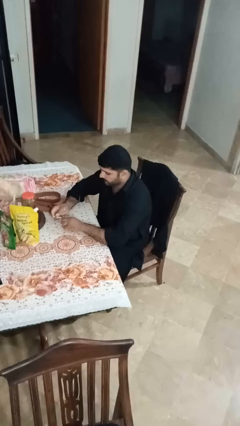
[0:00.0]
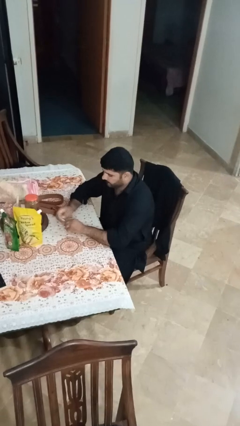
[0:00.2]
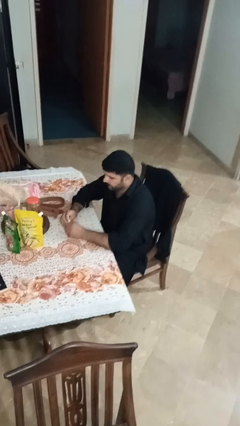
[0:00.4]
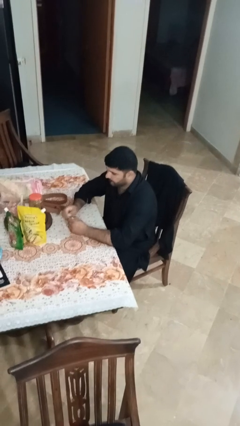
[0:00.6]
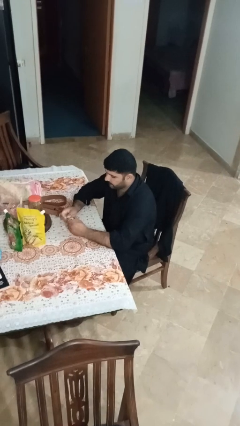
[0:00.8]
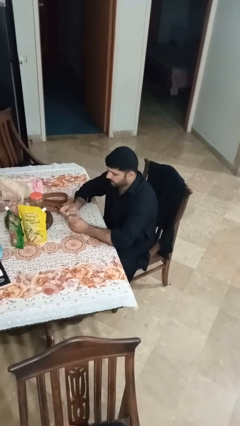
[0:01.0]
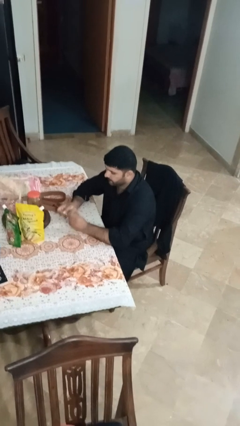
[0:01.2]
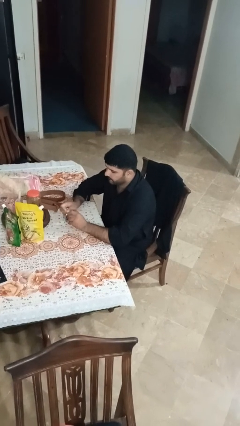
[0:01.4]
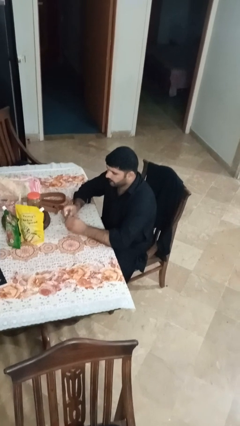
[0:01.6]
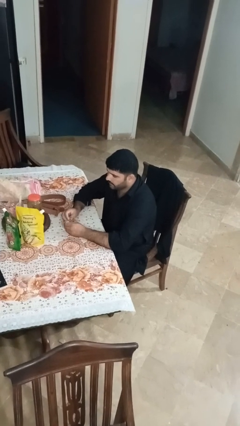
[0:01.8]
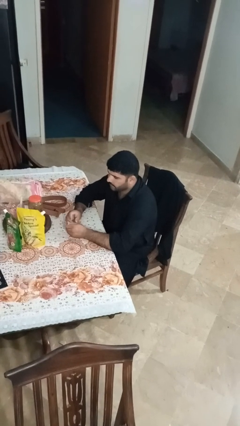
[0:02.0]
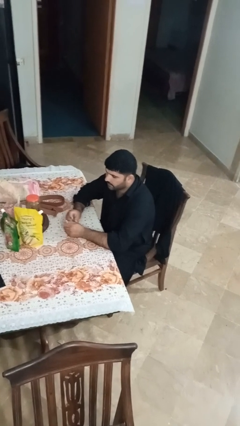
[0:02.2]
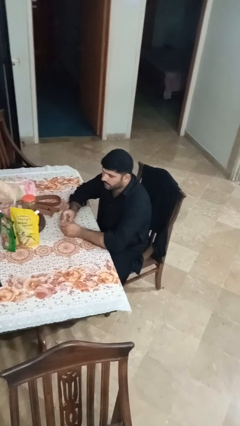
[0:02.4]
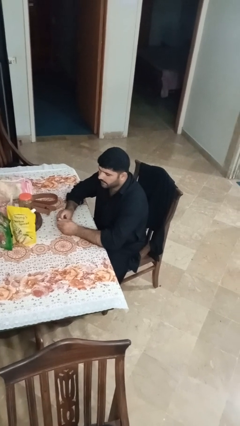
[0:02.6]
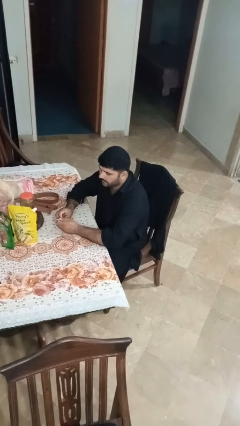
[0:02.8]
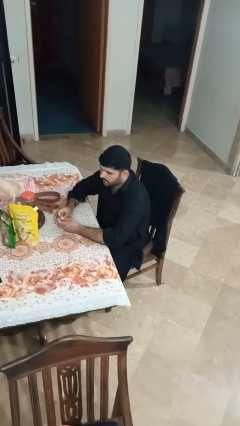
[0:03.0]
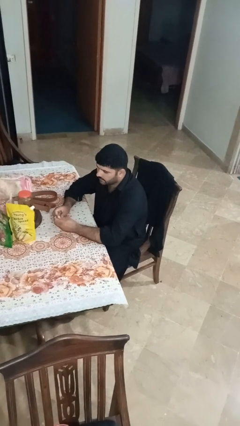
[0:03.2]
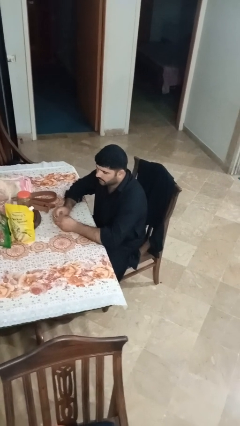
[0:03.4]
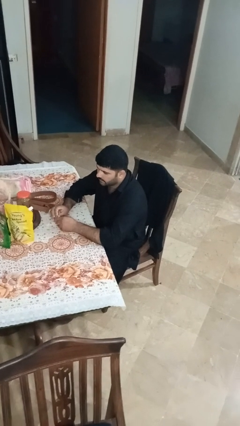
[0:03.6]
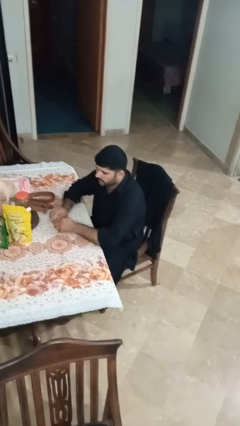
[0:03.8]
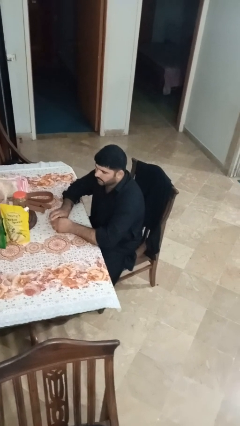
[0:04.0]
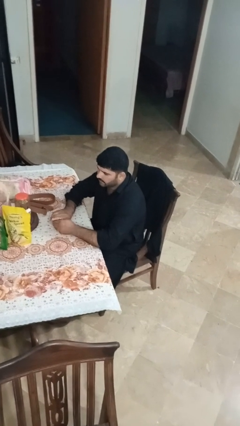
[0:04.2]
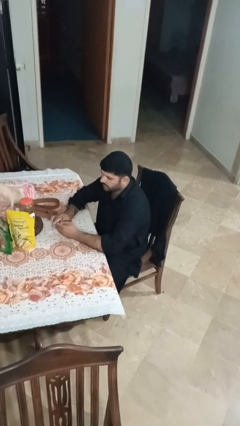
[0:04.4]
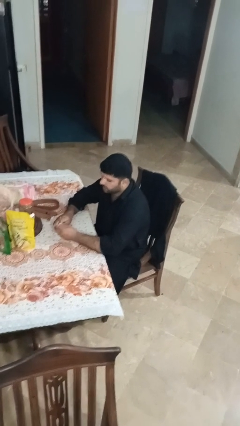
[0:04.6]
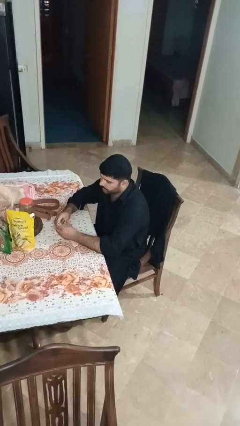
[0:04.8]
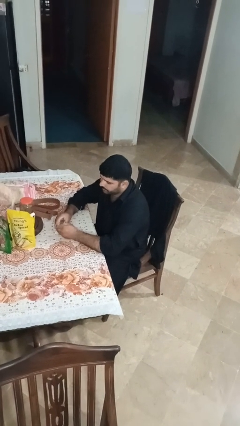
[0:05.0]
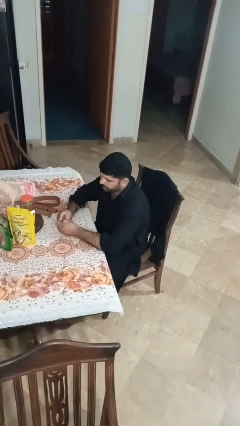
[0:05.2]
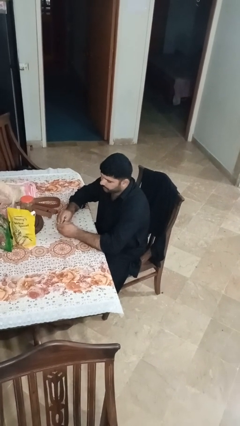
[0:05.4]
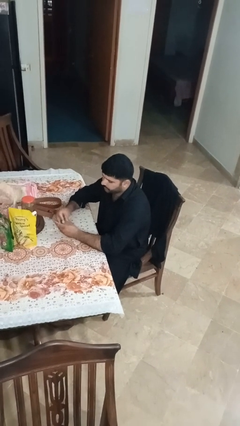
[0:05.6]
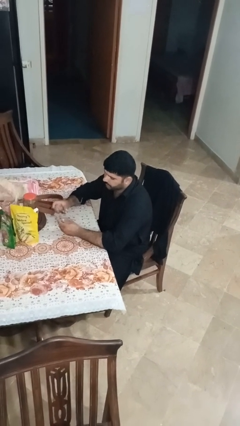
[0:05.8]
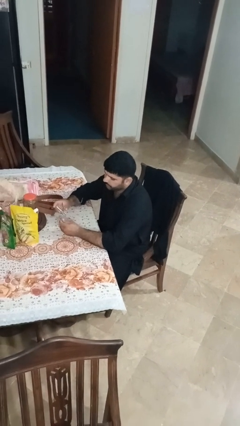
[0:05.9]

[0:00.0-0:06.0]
person clips fingernails

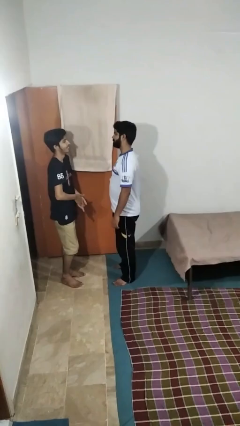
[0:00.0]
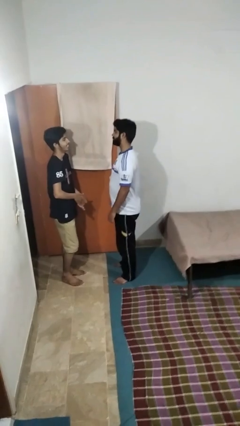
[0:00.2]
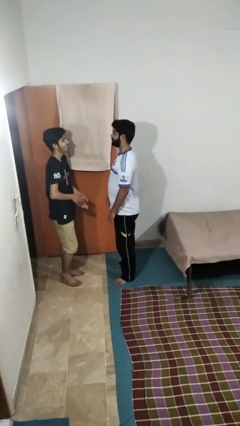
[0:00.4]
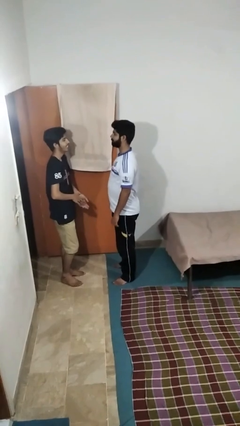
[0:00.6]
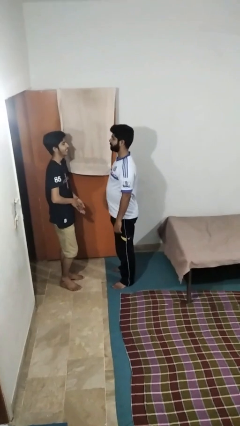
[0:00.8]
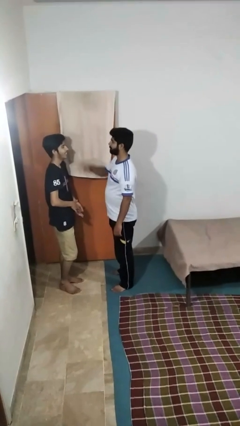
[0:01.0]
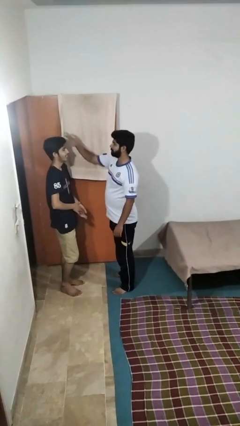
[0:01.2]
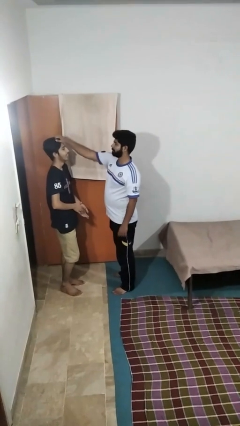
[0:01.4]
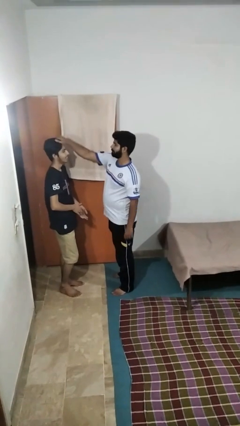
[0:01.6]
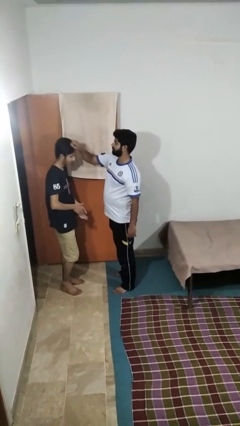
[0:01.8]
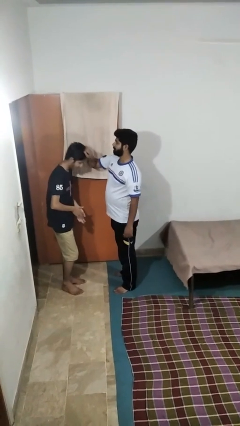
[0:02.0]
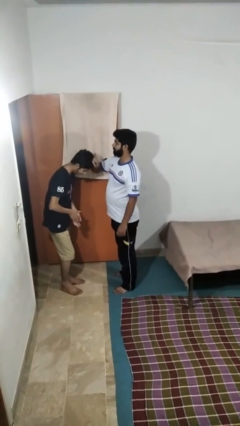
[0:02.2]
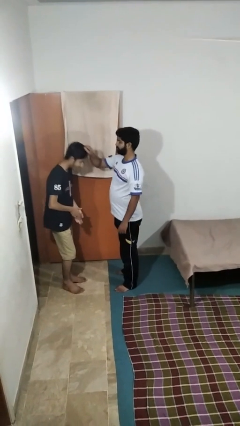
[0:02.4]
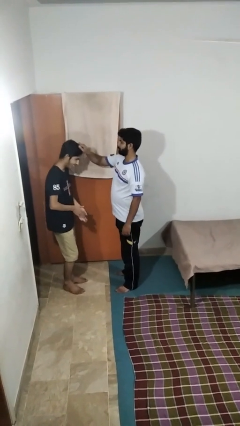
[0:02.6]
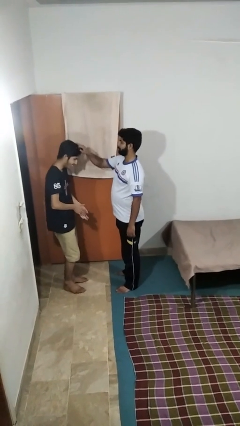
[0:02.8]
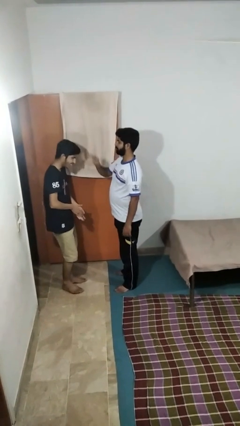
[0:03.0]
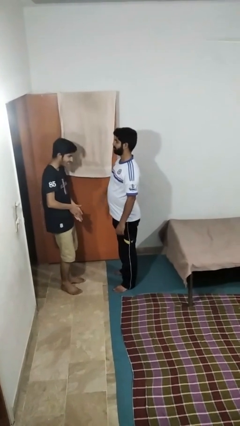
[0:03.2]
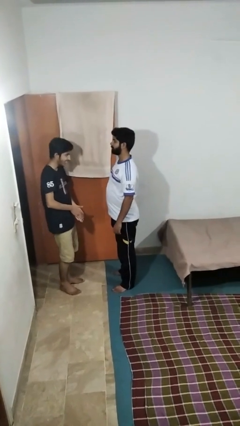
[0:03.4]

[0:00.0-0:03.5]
person grabs person by hair

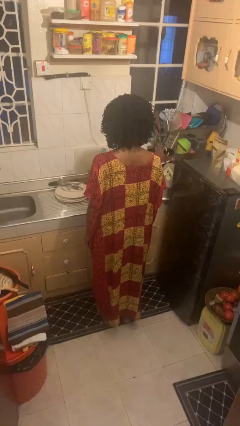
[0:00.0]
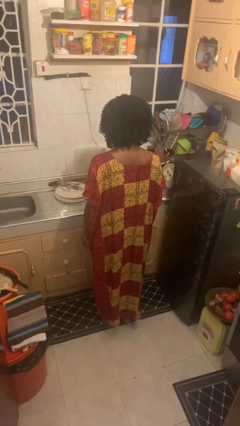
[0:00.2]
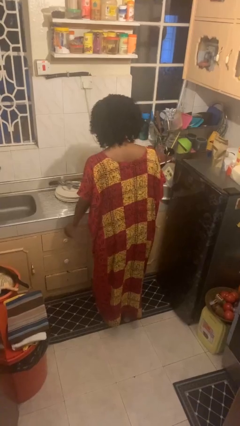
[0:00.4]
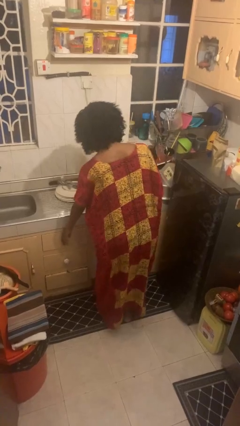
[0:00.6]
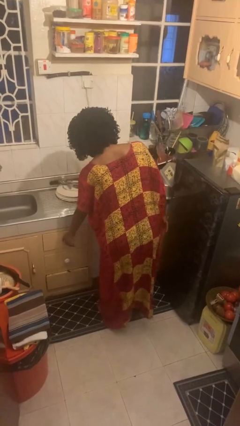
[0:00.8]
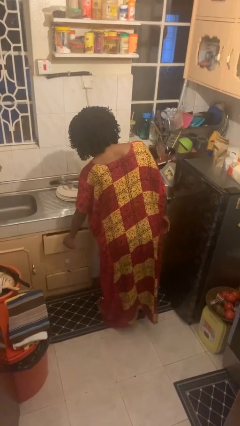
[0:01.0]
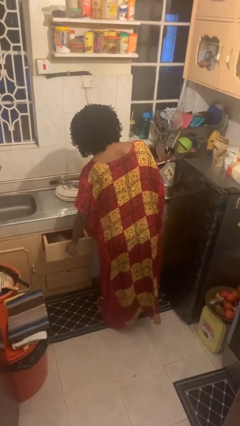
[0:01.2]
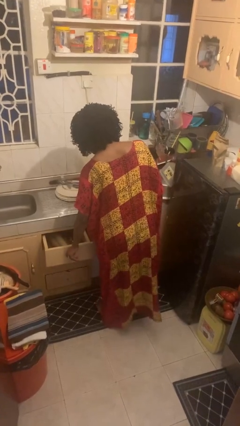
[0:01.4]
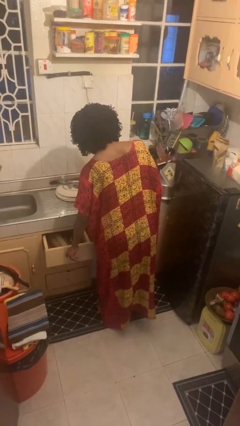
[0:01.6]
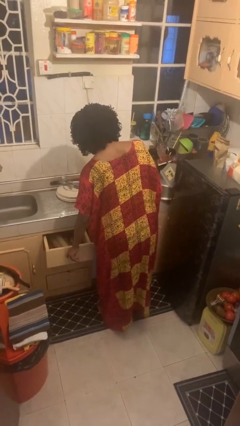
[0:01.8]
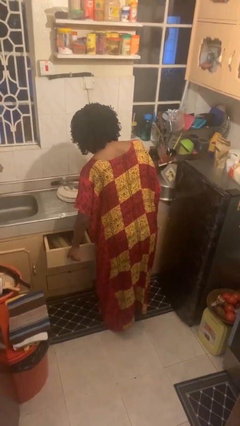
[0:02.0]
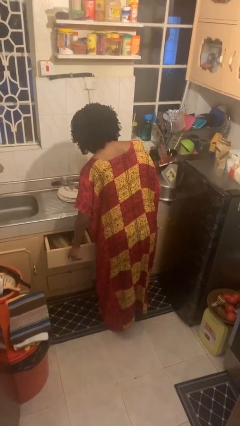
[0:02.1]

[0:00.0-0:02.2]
person opens kitchen drawer

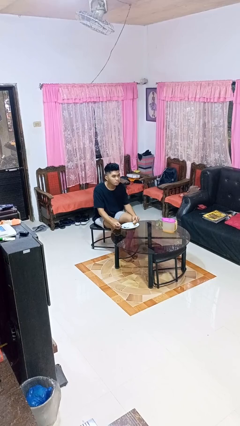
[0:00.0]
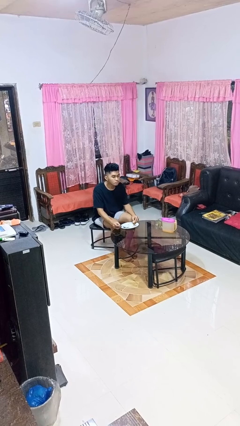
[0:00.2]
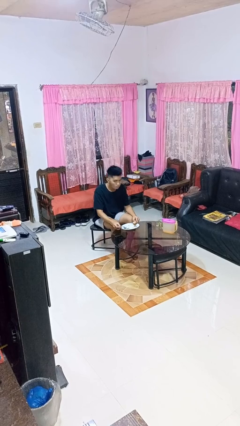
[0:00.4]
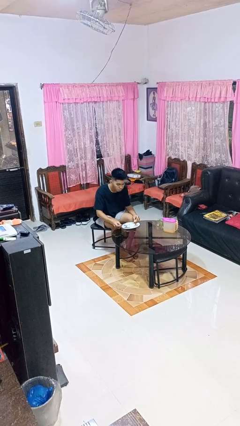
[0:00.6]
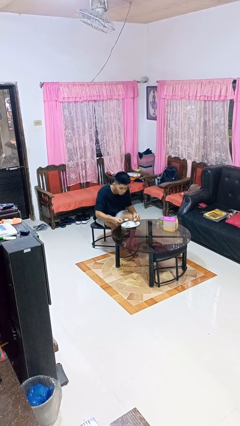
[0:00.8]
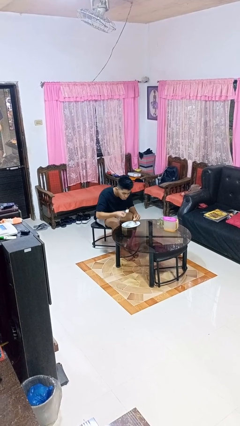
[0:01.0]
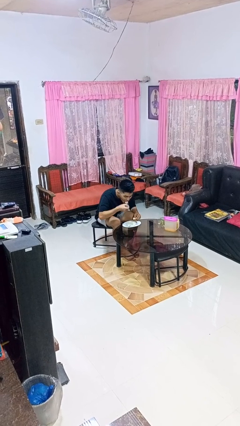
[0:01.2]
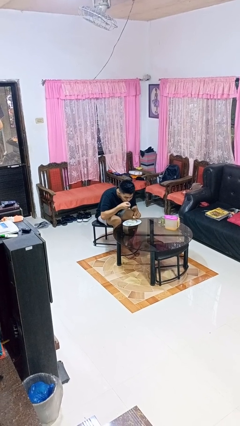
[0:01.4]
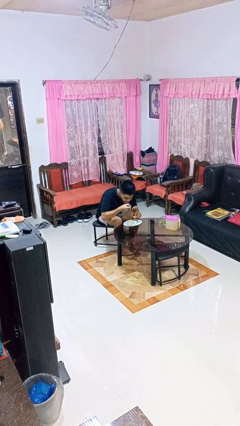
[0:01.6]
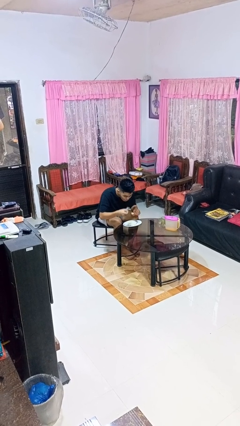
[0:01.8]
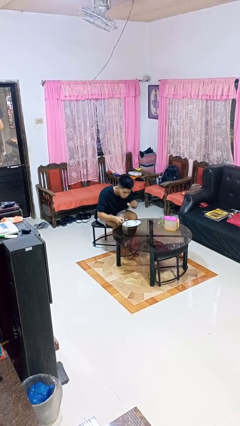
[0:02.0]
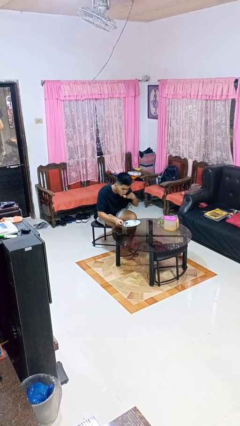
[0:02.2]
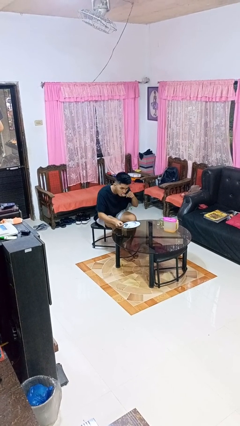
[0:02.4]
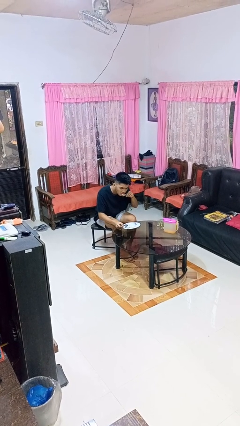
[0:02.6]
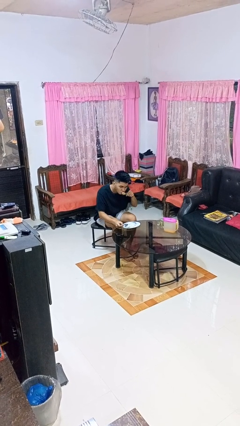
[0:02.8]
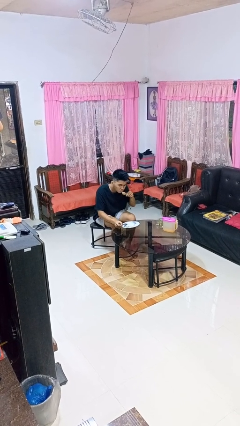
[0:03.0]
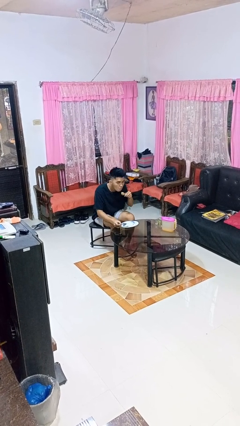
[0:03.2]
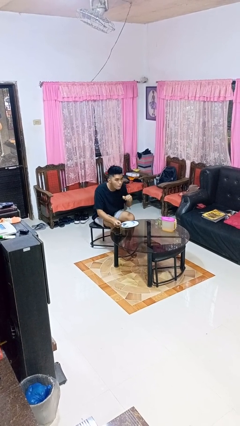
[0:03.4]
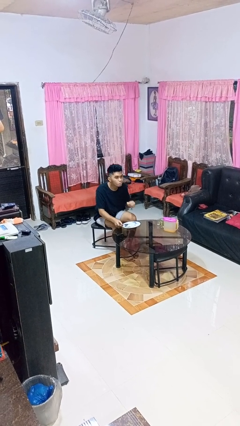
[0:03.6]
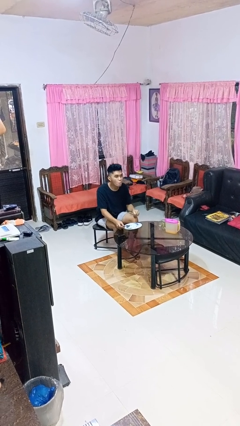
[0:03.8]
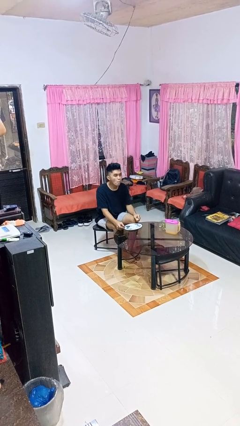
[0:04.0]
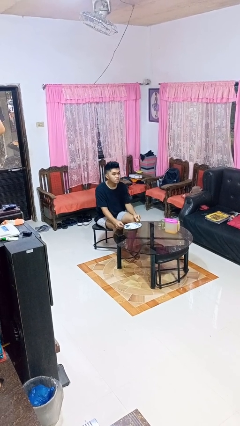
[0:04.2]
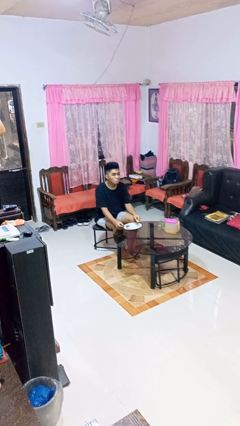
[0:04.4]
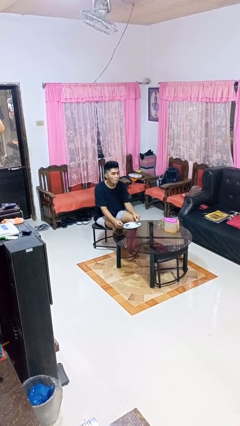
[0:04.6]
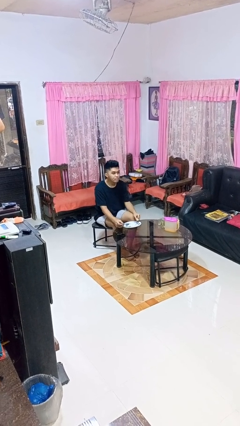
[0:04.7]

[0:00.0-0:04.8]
person eats with utensil

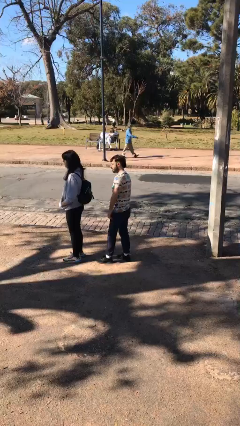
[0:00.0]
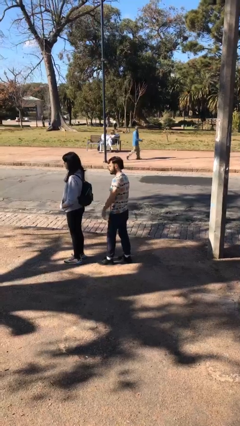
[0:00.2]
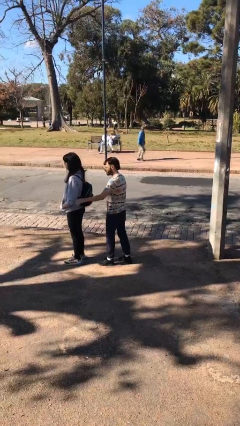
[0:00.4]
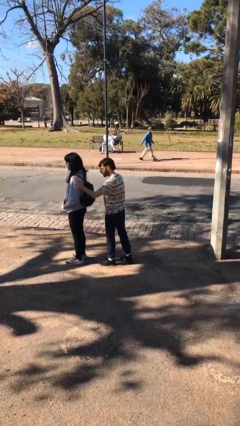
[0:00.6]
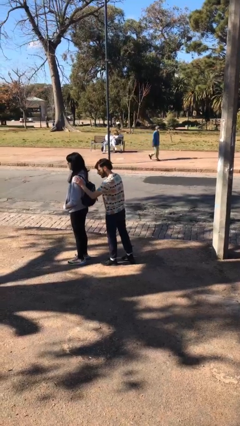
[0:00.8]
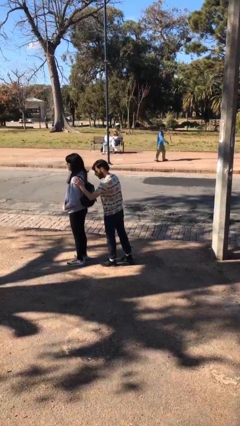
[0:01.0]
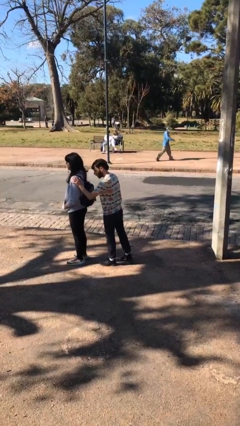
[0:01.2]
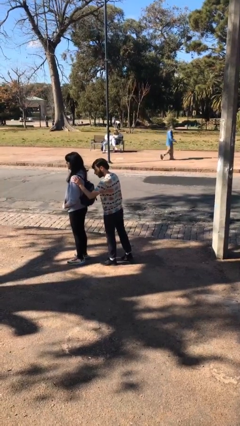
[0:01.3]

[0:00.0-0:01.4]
person grabs person by shoulder

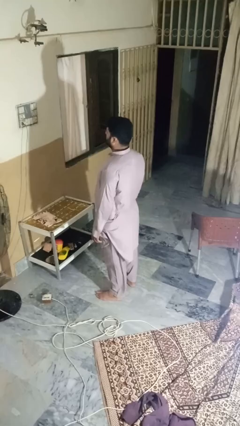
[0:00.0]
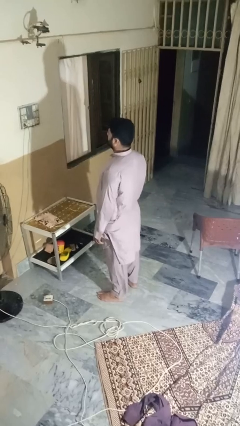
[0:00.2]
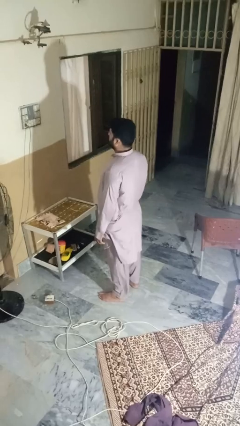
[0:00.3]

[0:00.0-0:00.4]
person sneezes into hand
